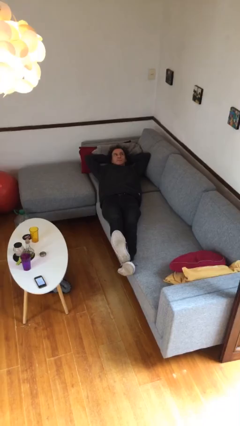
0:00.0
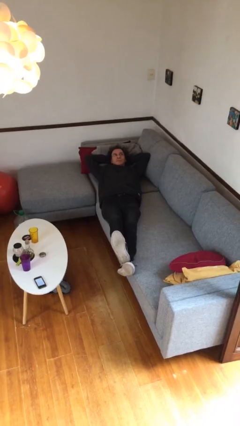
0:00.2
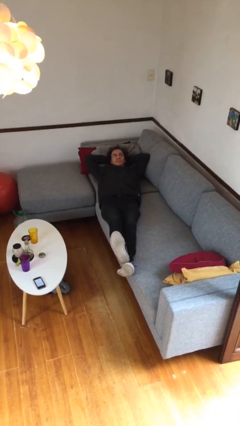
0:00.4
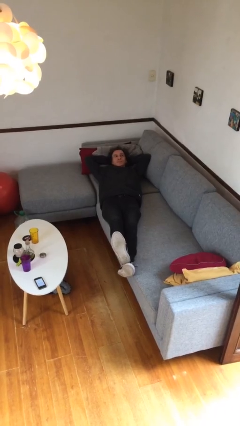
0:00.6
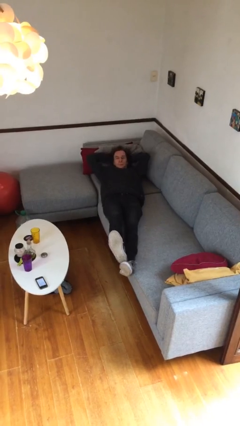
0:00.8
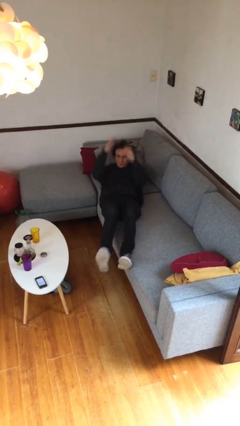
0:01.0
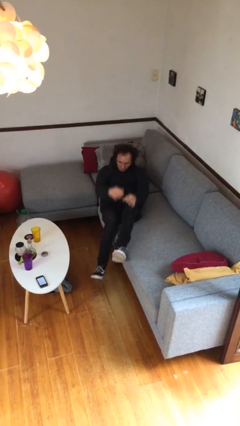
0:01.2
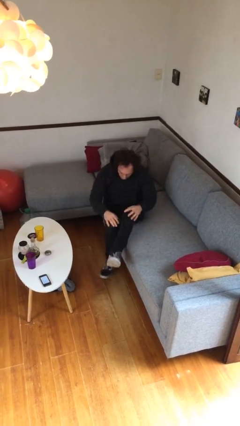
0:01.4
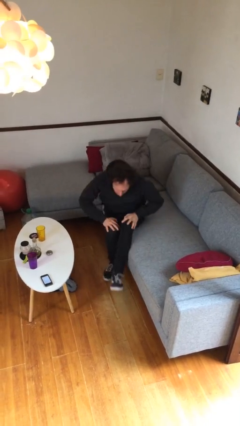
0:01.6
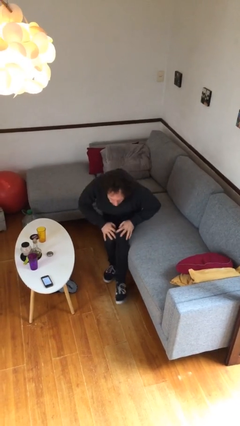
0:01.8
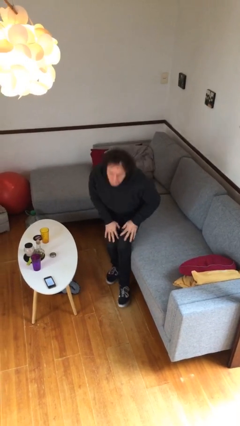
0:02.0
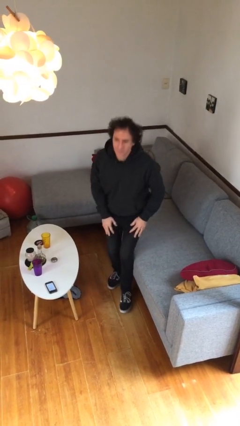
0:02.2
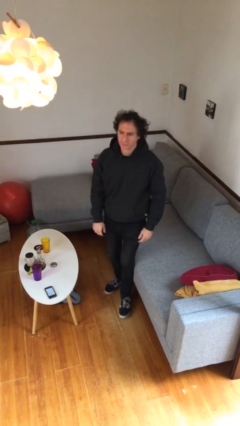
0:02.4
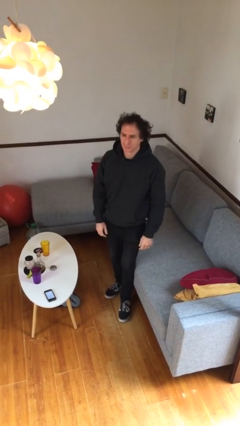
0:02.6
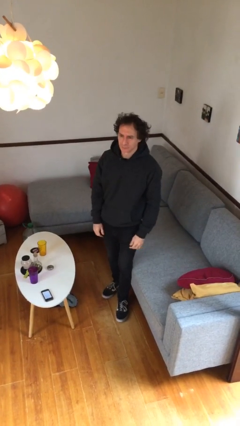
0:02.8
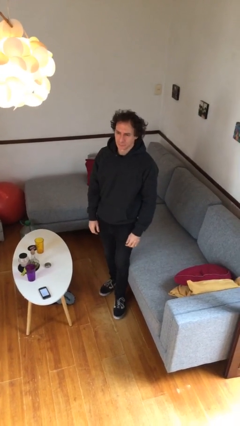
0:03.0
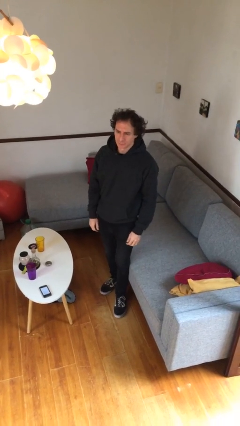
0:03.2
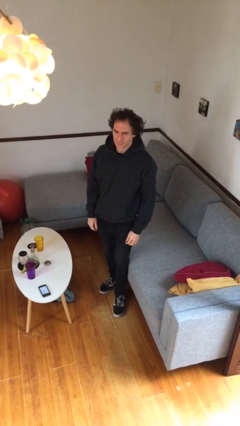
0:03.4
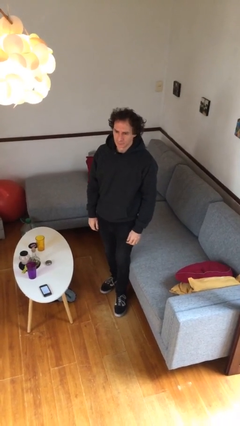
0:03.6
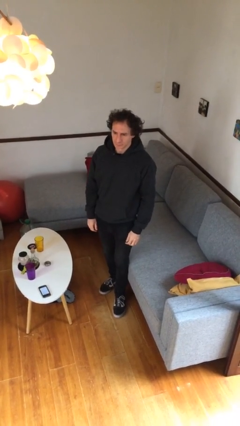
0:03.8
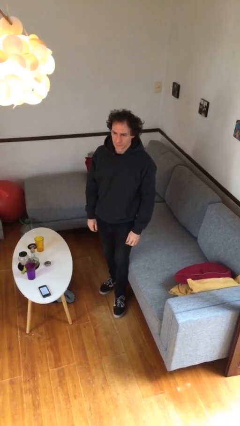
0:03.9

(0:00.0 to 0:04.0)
person stands up

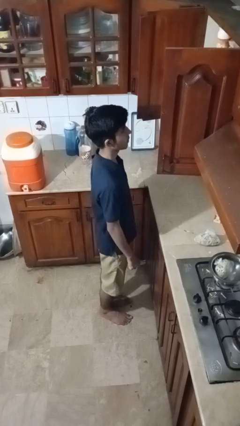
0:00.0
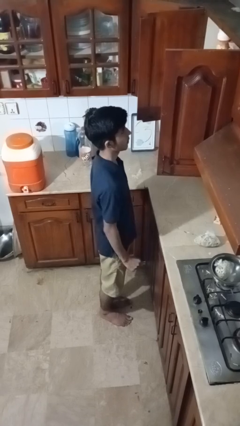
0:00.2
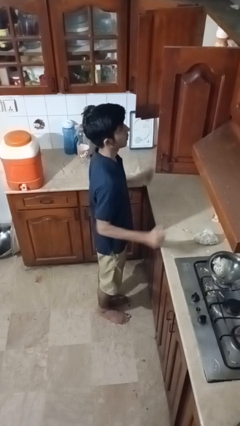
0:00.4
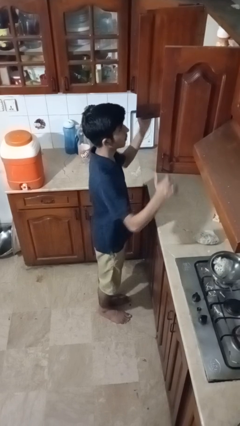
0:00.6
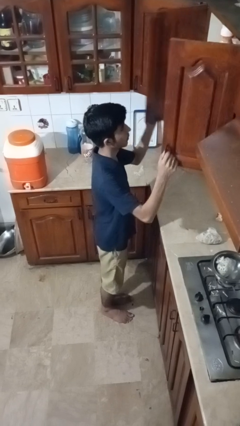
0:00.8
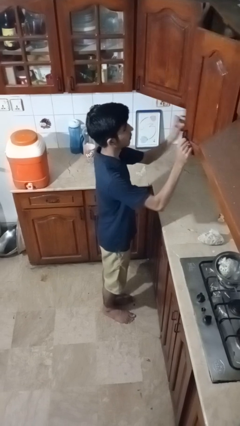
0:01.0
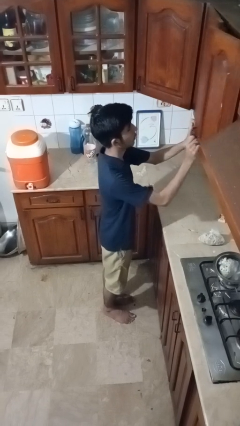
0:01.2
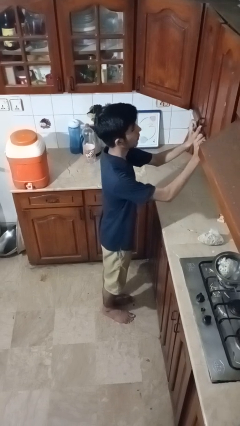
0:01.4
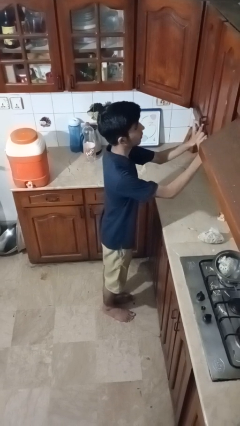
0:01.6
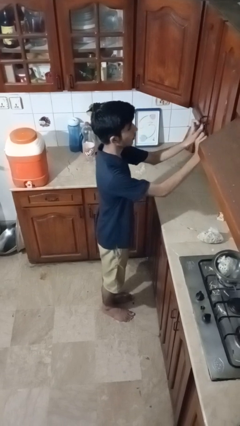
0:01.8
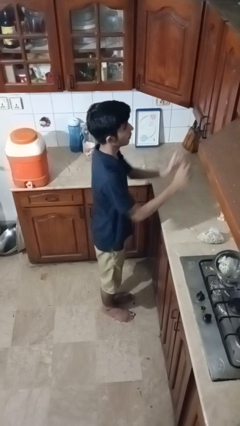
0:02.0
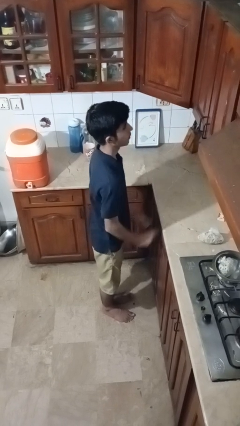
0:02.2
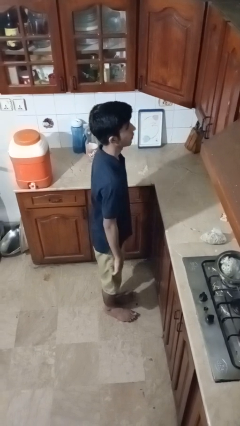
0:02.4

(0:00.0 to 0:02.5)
person closes cabinet

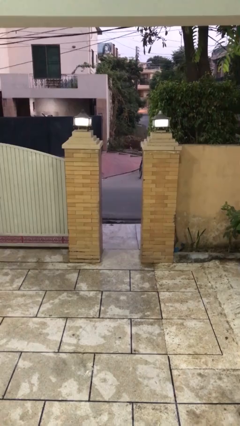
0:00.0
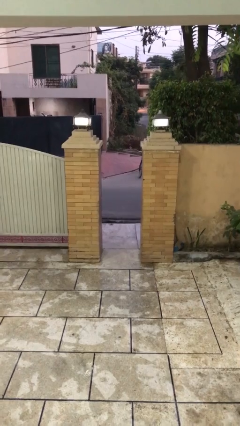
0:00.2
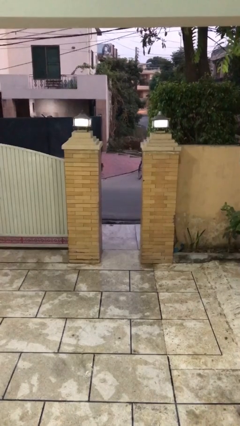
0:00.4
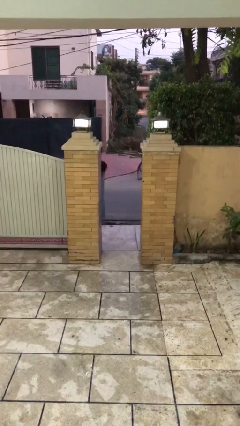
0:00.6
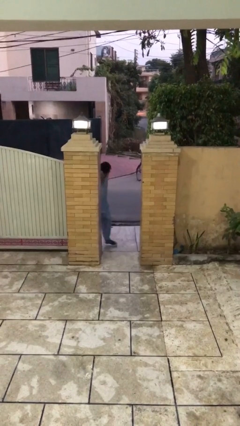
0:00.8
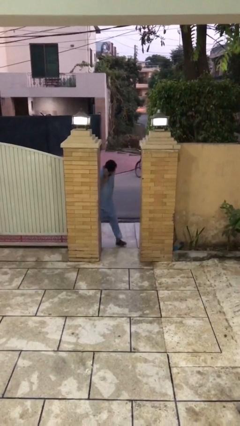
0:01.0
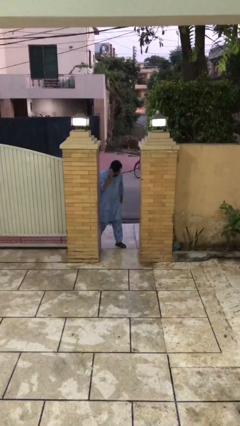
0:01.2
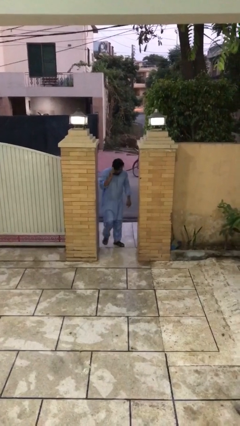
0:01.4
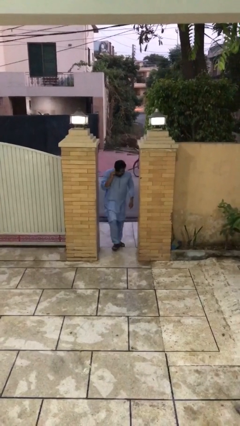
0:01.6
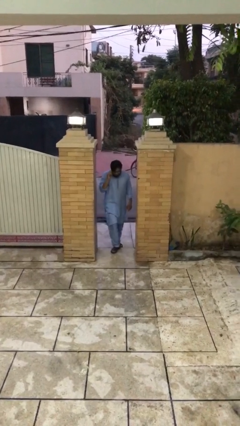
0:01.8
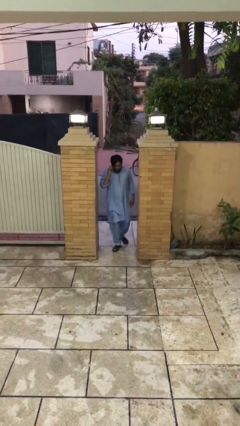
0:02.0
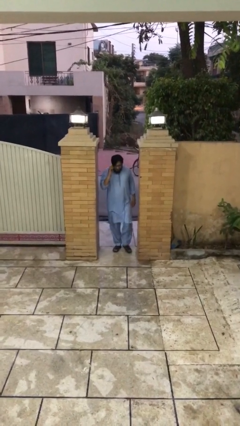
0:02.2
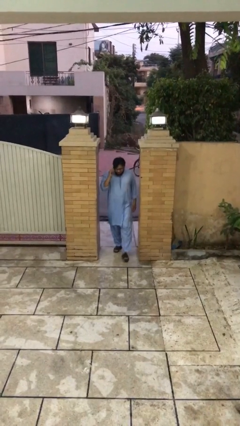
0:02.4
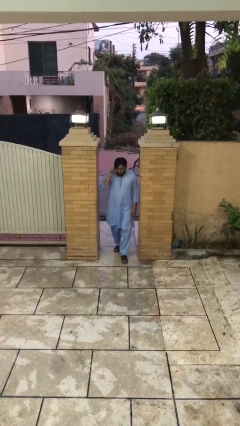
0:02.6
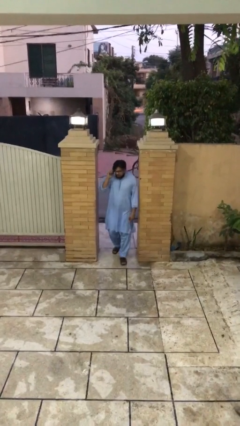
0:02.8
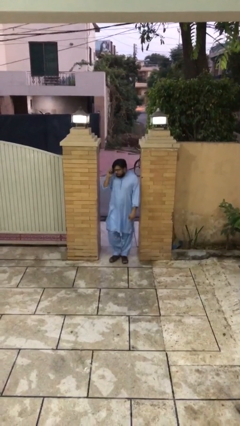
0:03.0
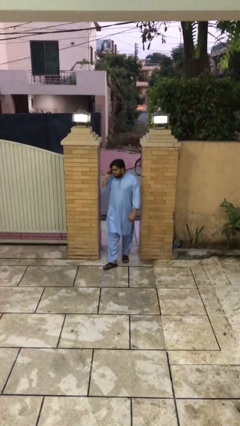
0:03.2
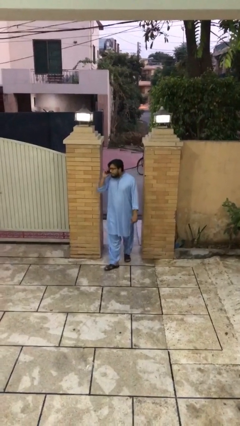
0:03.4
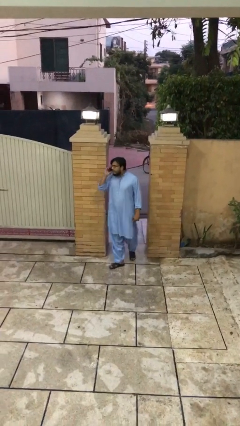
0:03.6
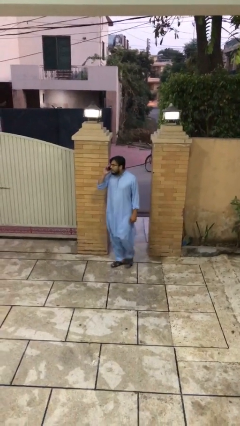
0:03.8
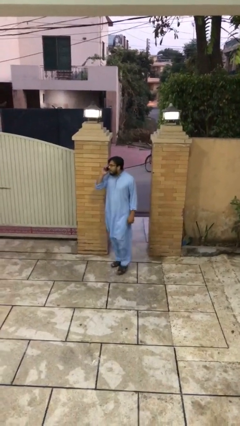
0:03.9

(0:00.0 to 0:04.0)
person enters scene through structure

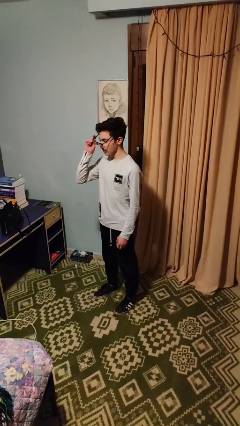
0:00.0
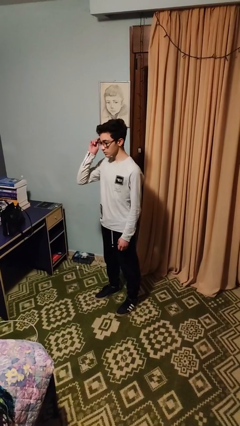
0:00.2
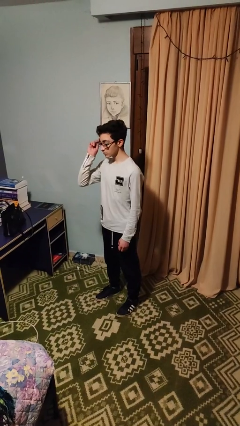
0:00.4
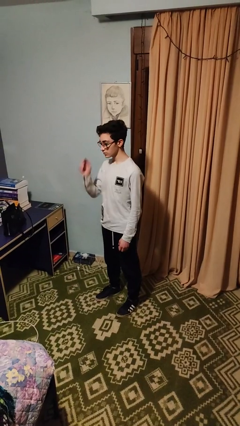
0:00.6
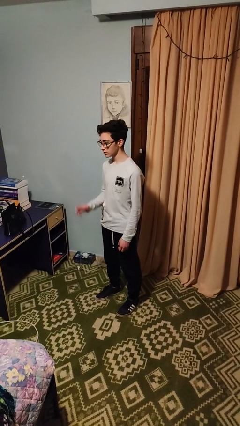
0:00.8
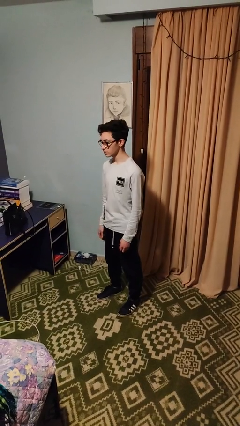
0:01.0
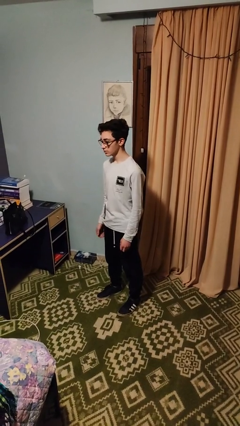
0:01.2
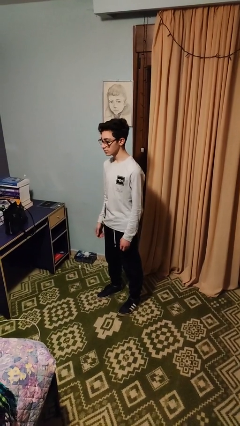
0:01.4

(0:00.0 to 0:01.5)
person puts on glasses

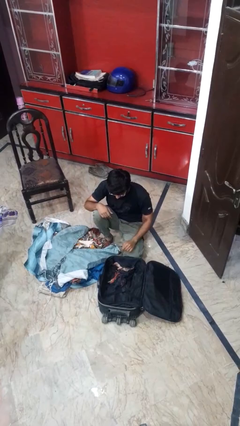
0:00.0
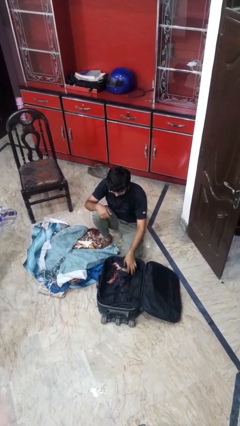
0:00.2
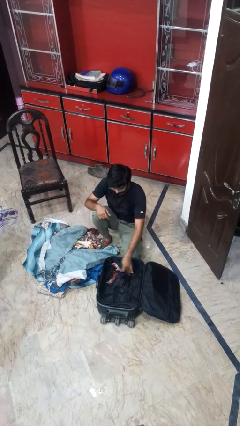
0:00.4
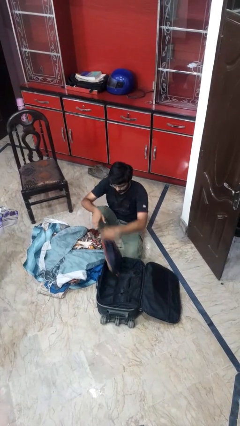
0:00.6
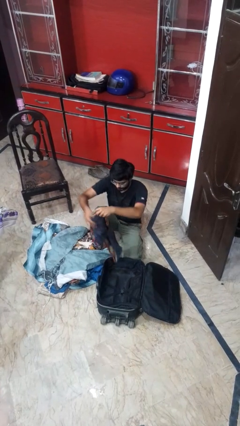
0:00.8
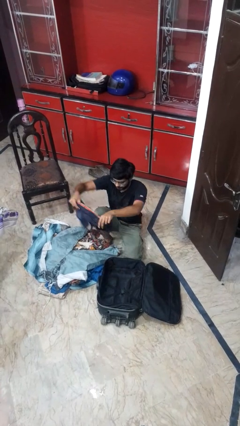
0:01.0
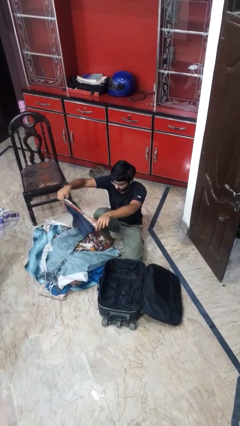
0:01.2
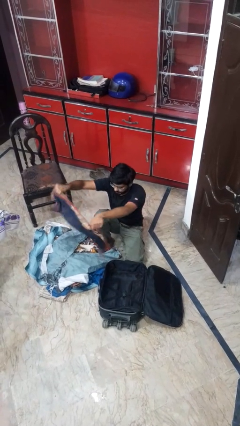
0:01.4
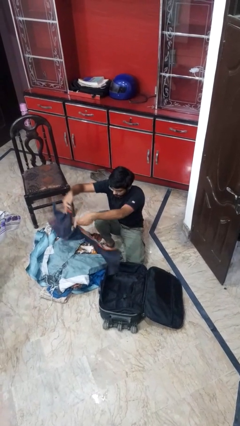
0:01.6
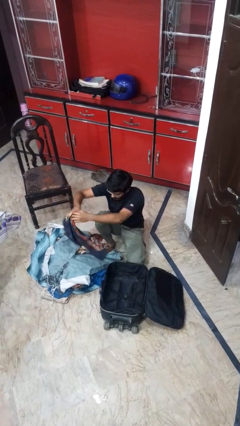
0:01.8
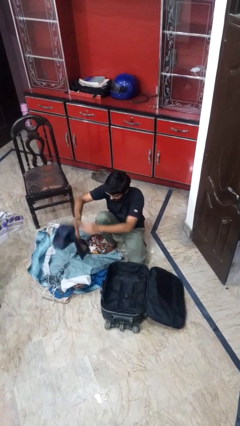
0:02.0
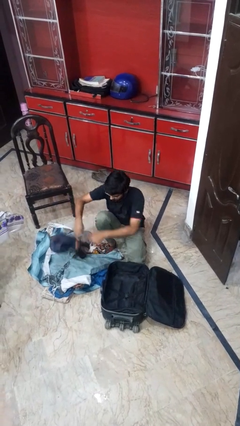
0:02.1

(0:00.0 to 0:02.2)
person unloads clothes from suitcase

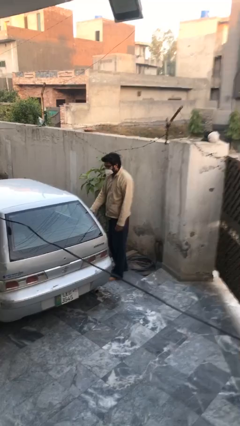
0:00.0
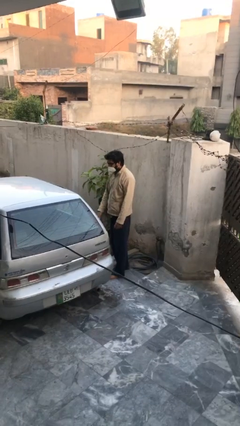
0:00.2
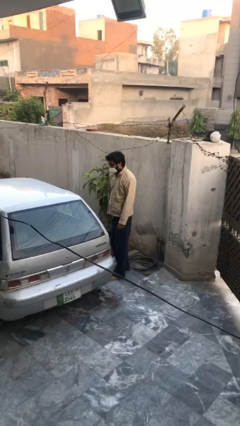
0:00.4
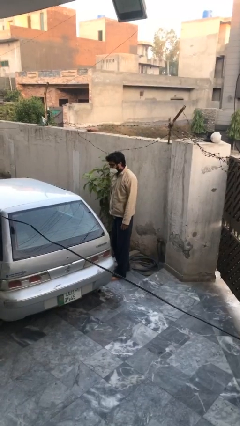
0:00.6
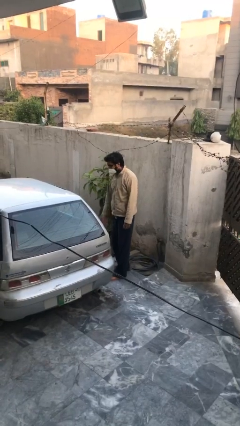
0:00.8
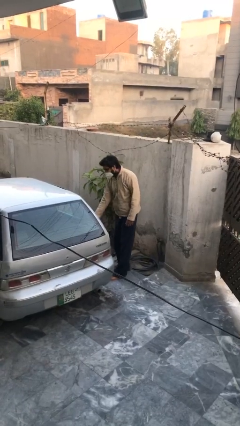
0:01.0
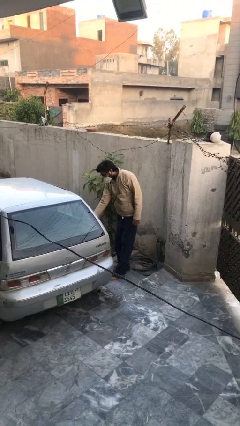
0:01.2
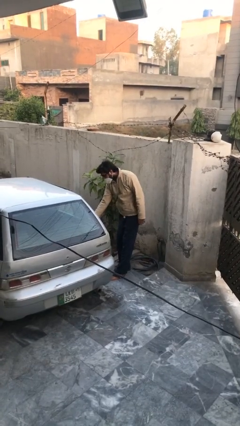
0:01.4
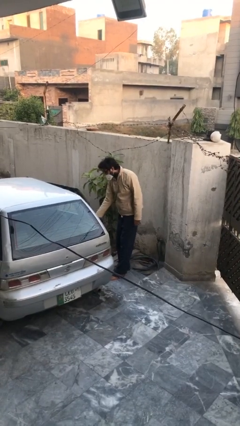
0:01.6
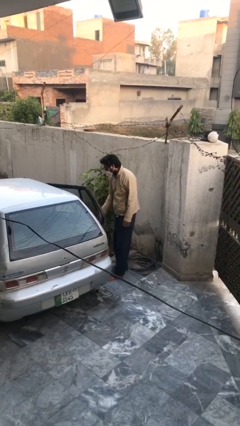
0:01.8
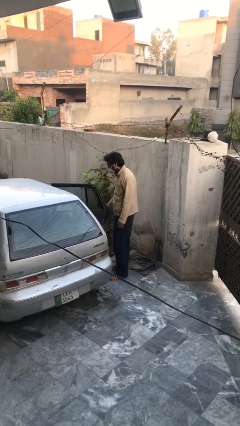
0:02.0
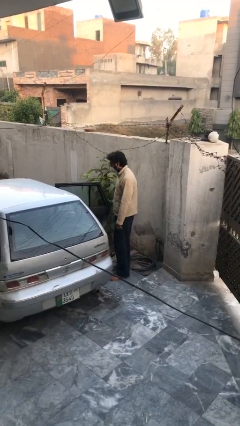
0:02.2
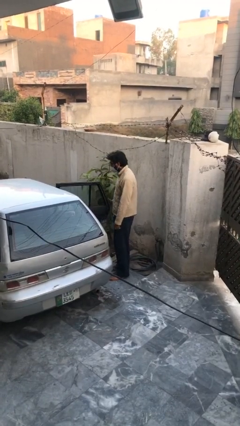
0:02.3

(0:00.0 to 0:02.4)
person opens car door

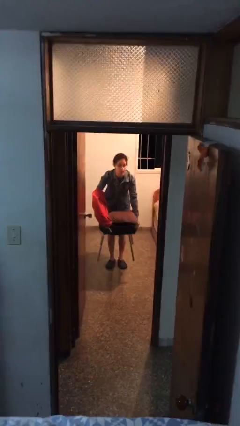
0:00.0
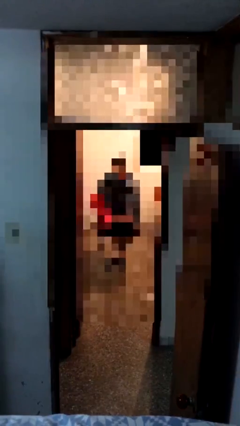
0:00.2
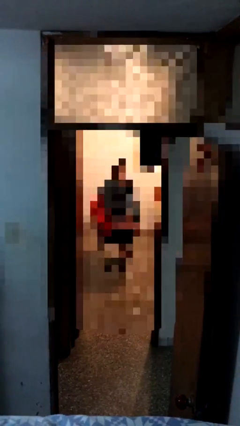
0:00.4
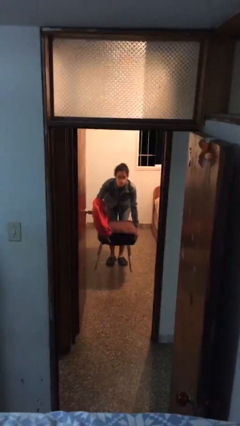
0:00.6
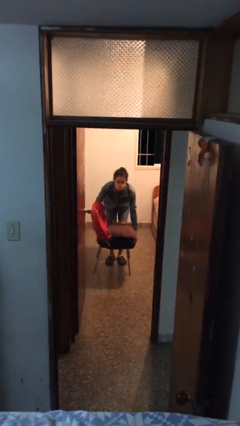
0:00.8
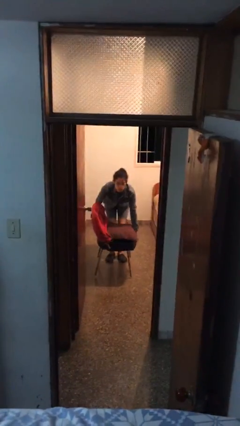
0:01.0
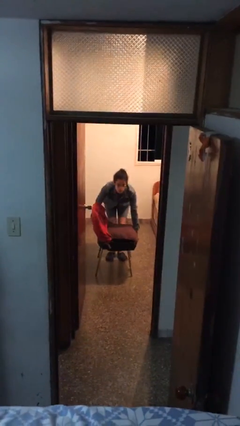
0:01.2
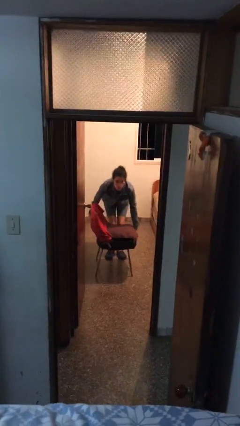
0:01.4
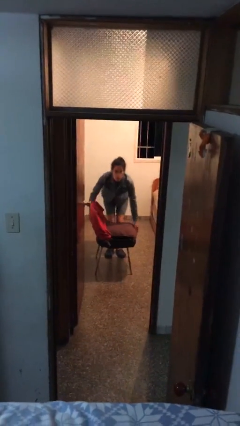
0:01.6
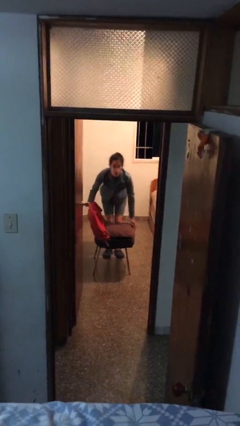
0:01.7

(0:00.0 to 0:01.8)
person puts down object on floor
